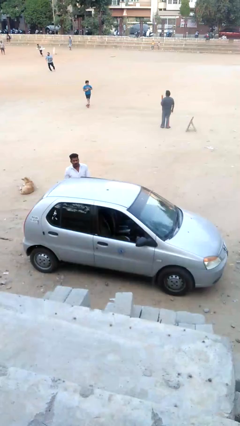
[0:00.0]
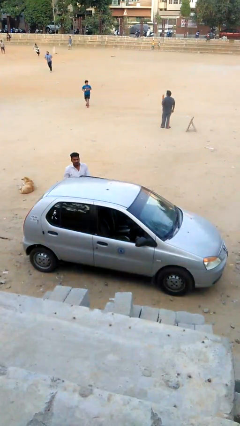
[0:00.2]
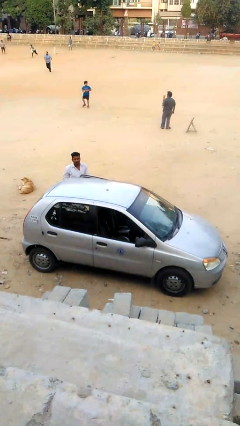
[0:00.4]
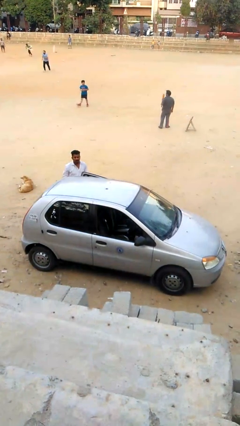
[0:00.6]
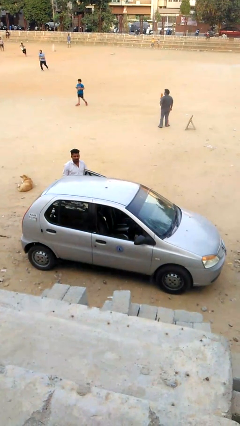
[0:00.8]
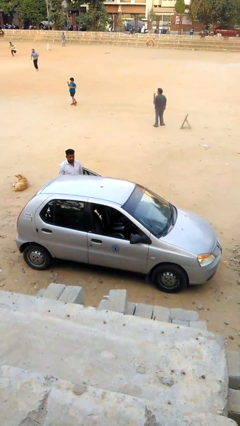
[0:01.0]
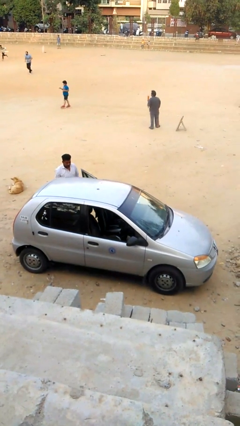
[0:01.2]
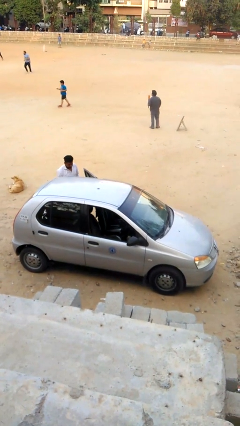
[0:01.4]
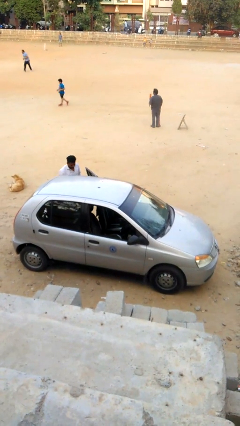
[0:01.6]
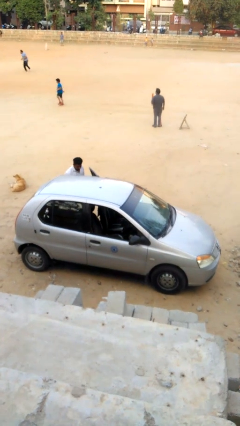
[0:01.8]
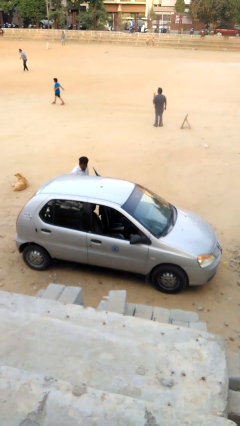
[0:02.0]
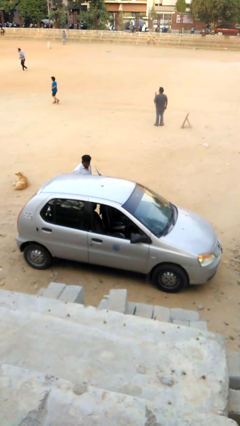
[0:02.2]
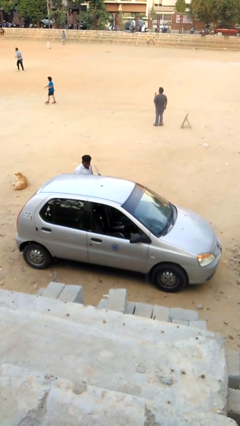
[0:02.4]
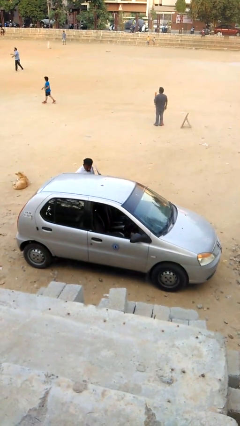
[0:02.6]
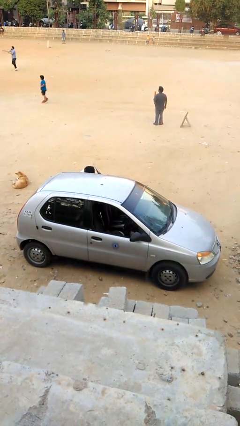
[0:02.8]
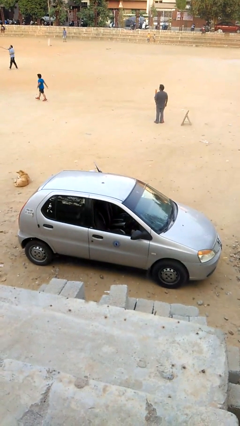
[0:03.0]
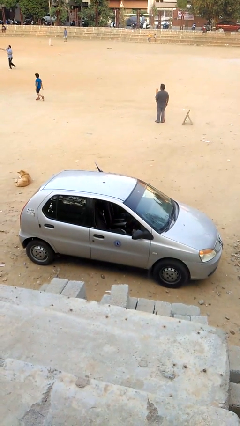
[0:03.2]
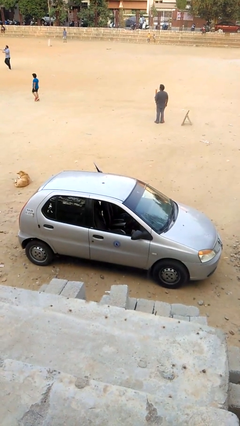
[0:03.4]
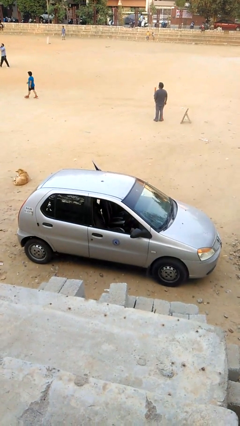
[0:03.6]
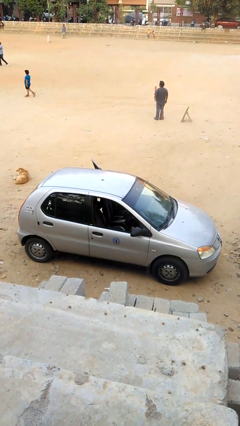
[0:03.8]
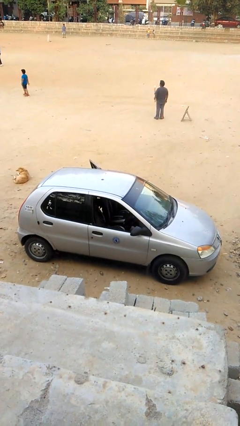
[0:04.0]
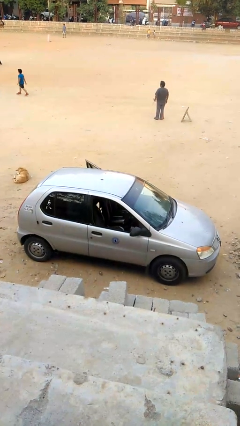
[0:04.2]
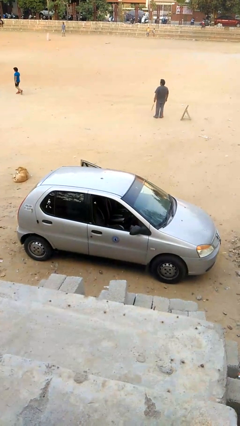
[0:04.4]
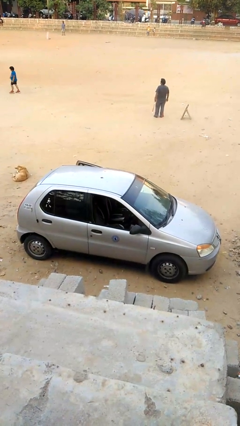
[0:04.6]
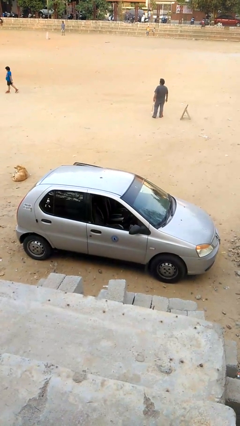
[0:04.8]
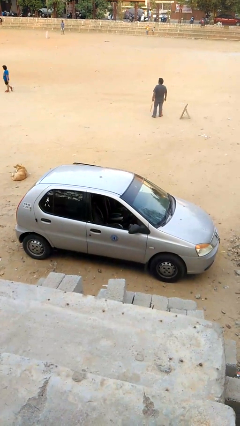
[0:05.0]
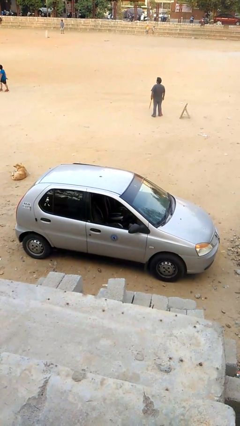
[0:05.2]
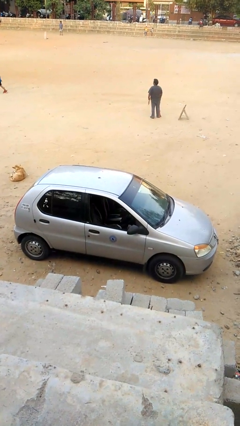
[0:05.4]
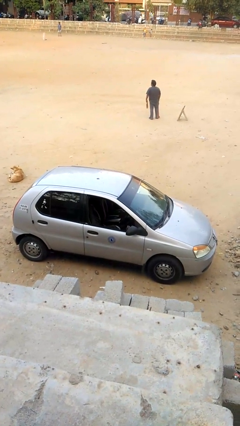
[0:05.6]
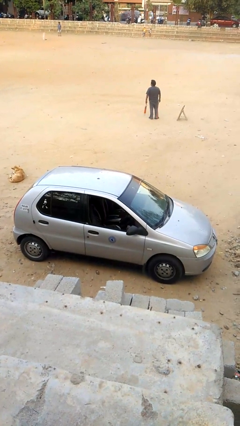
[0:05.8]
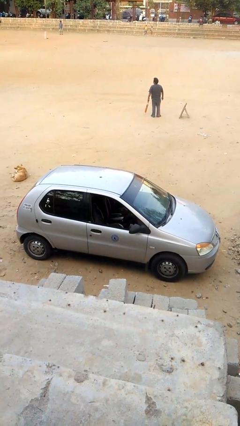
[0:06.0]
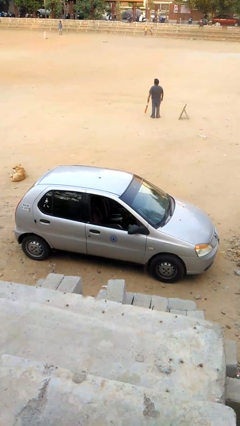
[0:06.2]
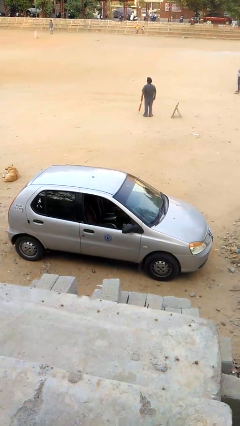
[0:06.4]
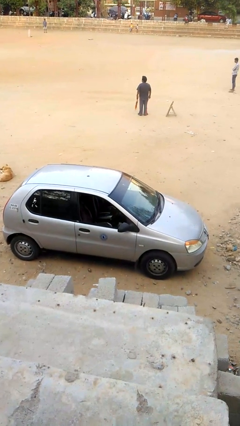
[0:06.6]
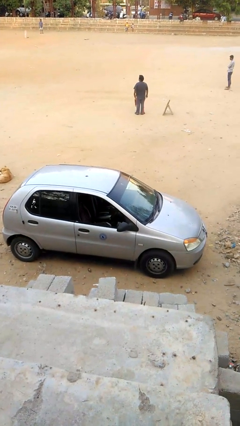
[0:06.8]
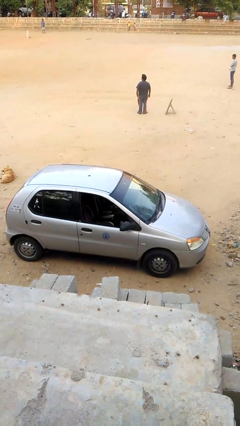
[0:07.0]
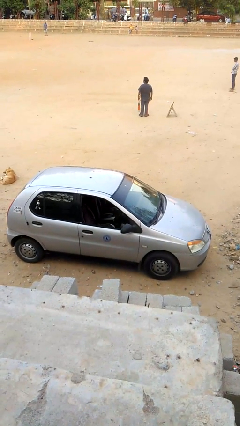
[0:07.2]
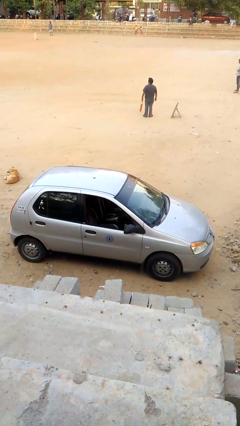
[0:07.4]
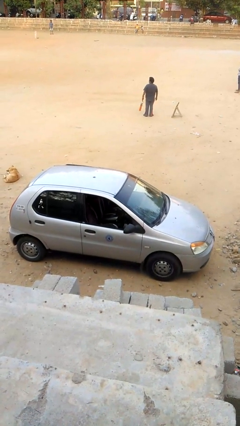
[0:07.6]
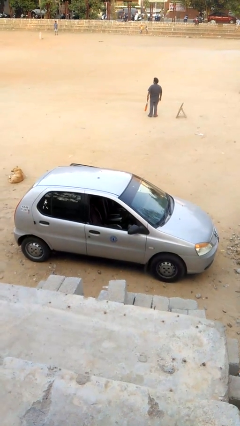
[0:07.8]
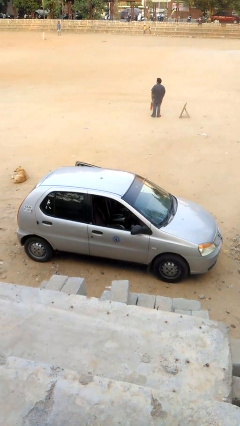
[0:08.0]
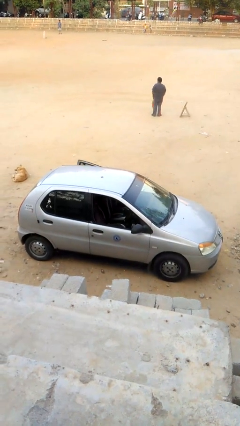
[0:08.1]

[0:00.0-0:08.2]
car picks up person

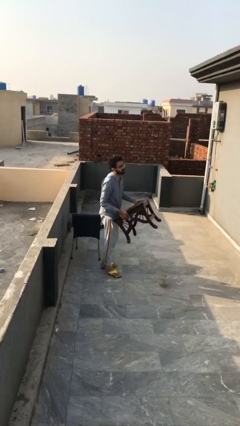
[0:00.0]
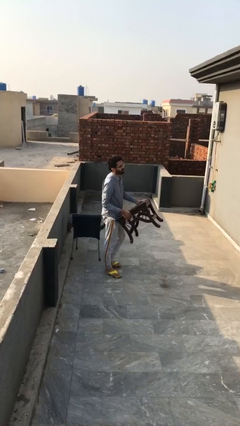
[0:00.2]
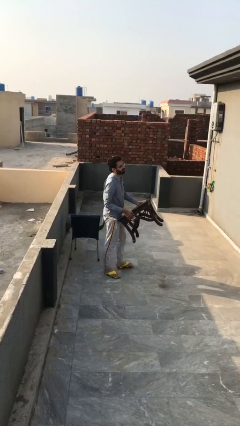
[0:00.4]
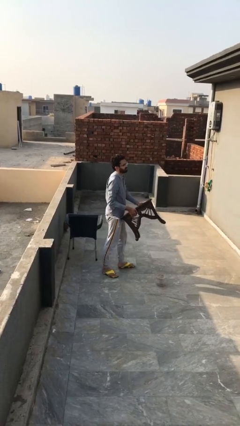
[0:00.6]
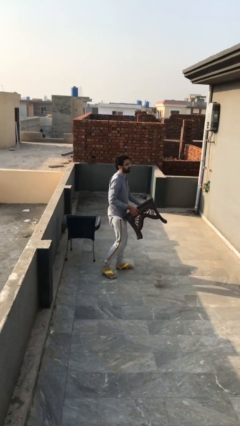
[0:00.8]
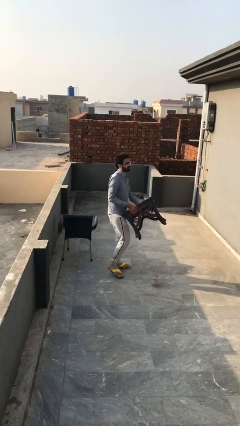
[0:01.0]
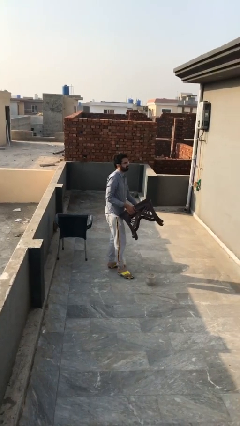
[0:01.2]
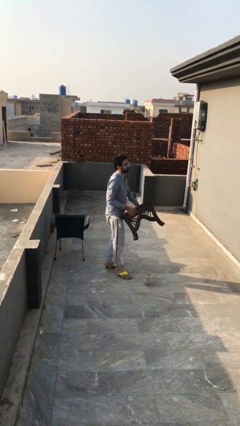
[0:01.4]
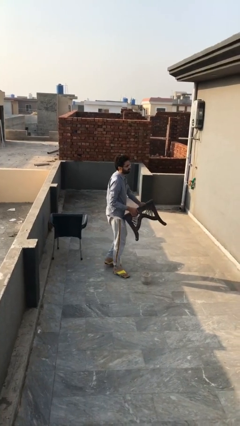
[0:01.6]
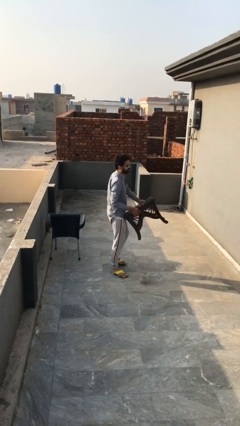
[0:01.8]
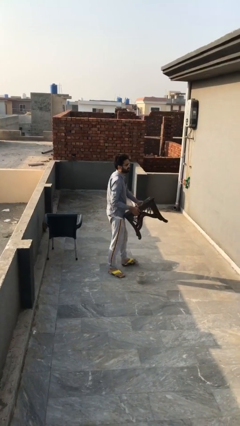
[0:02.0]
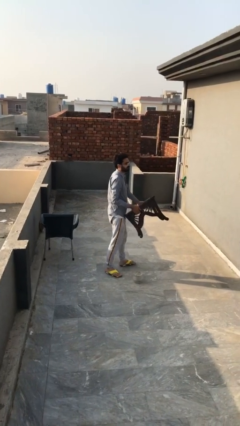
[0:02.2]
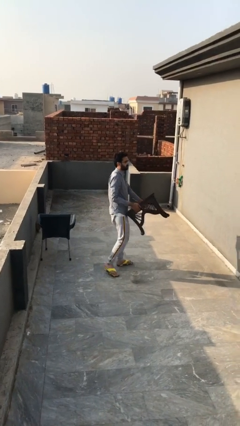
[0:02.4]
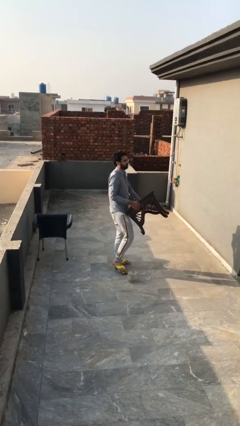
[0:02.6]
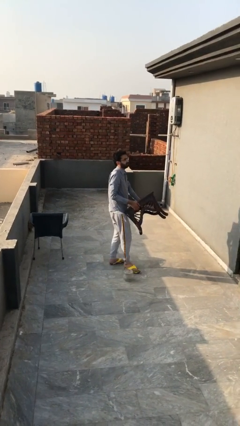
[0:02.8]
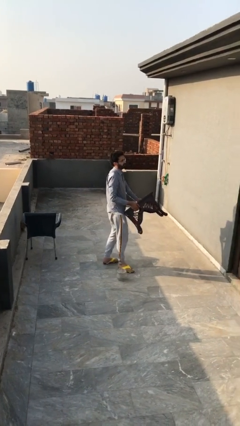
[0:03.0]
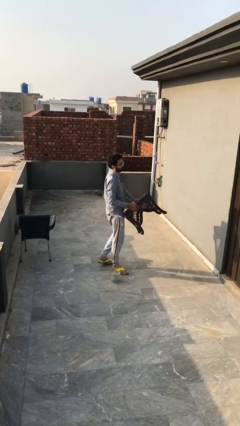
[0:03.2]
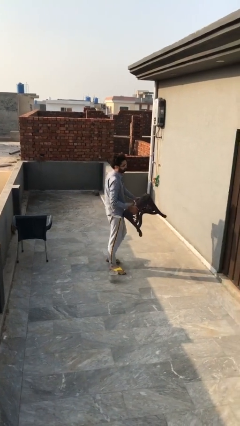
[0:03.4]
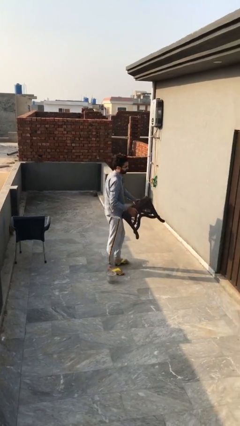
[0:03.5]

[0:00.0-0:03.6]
person carries heavy object

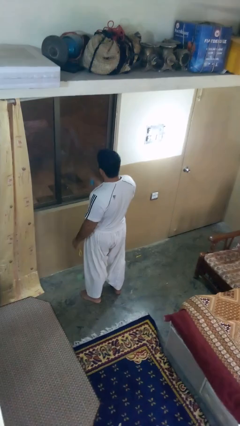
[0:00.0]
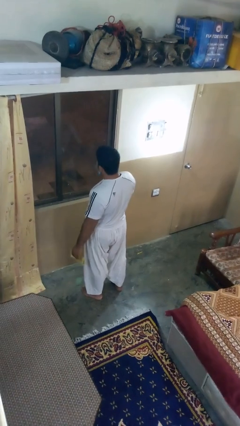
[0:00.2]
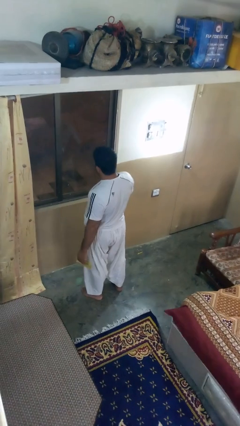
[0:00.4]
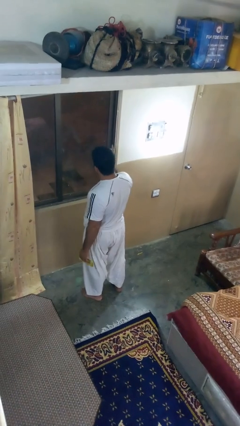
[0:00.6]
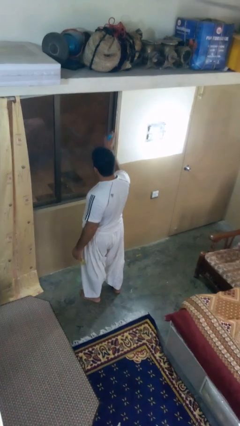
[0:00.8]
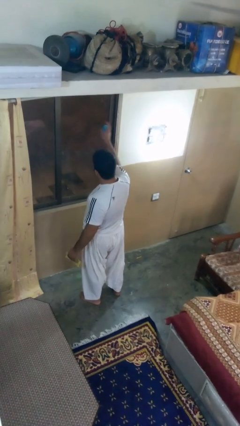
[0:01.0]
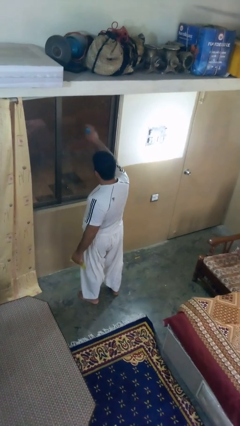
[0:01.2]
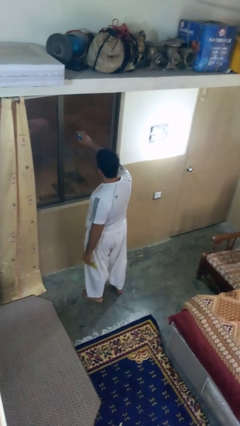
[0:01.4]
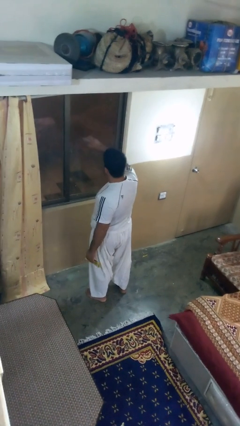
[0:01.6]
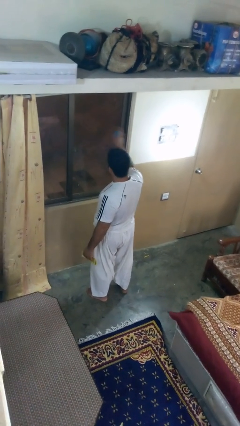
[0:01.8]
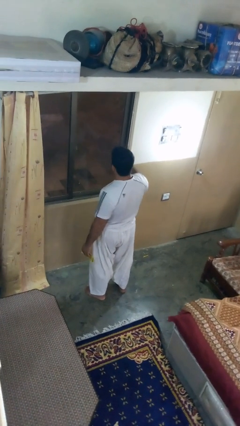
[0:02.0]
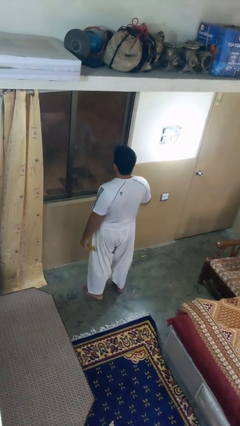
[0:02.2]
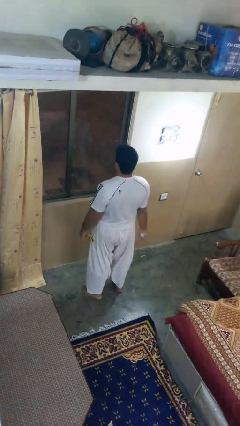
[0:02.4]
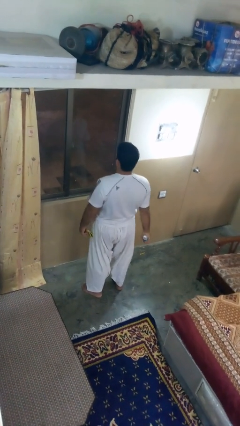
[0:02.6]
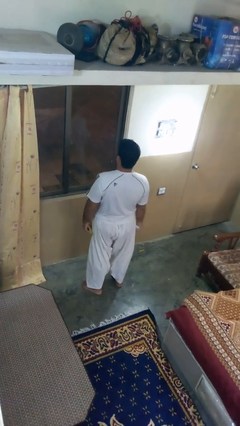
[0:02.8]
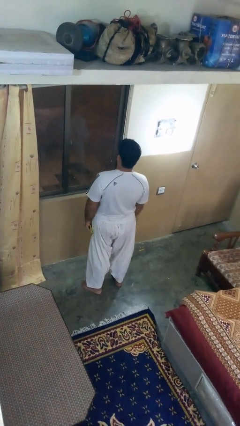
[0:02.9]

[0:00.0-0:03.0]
person sprays from bottle

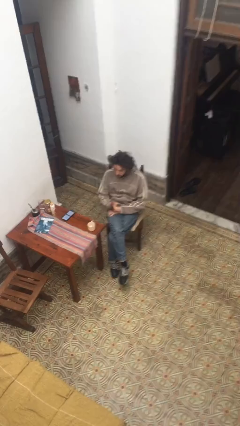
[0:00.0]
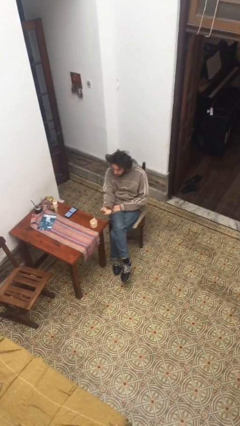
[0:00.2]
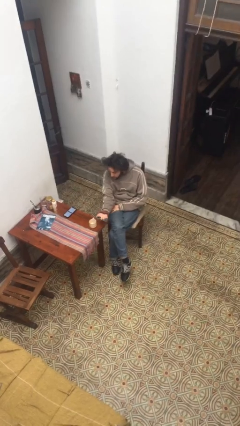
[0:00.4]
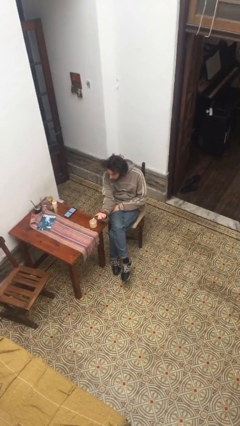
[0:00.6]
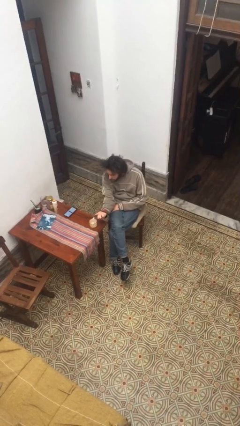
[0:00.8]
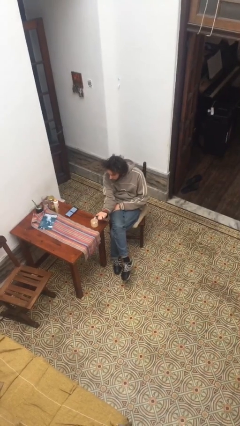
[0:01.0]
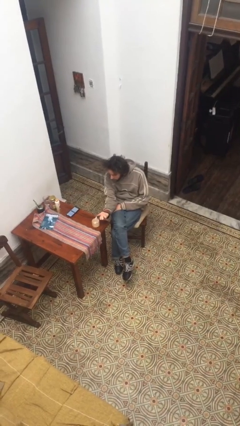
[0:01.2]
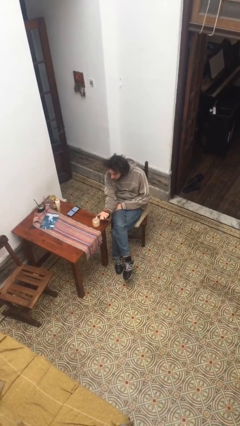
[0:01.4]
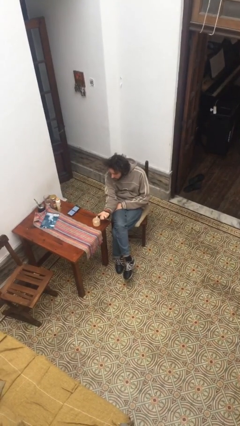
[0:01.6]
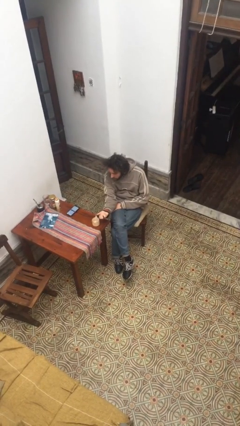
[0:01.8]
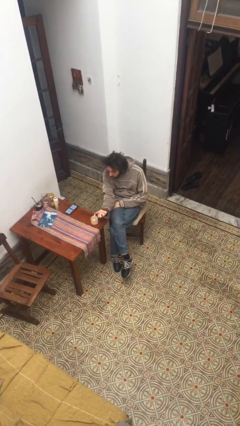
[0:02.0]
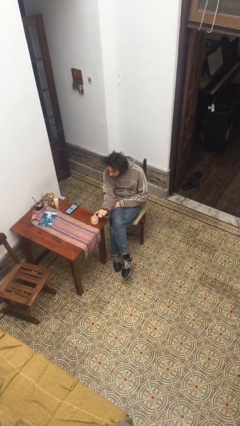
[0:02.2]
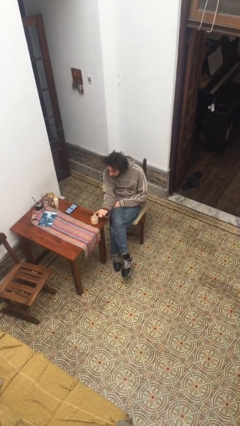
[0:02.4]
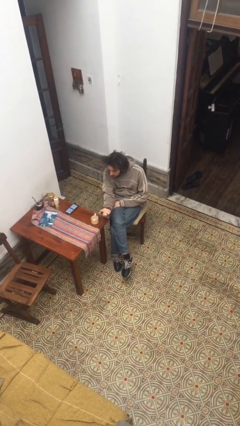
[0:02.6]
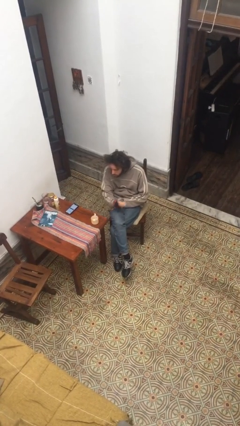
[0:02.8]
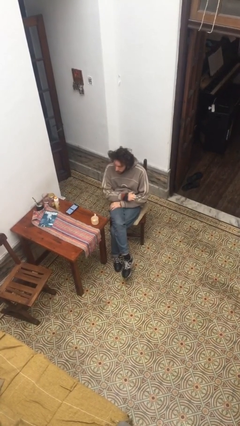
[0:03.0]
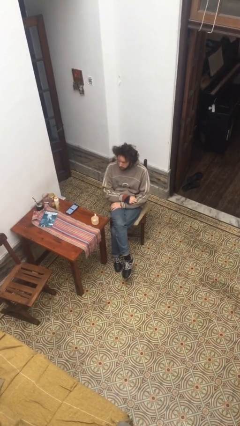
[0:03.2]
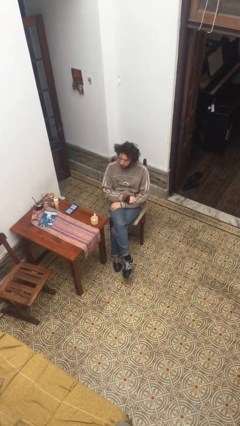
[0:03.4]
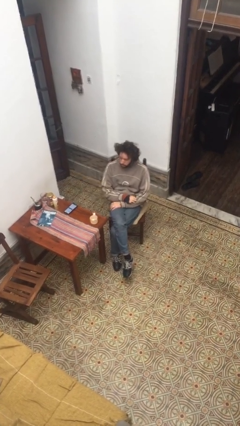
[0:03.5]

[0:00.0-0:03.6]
person lights candle
